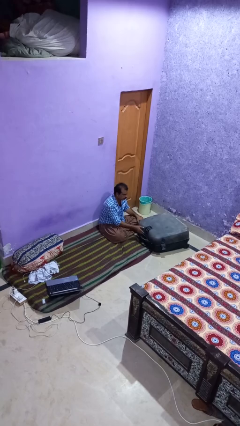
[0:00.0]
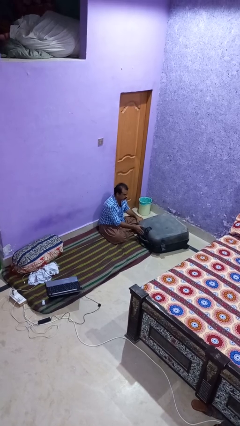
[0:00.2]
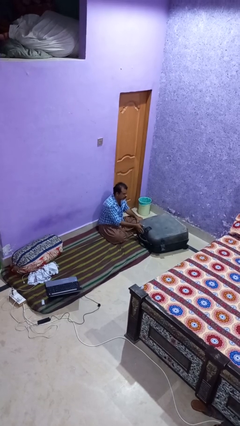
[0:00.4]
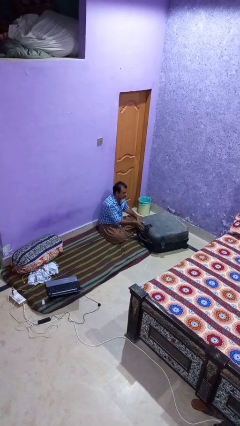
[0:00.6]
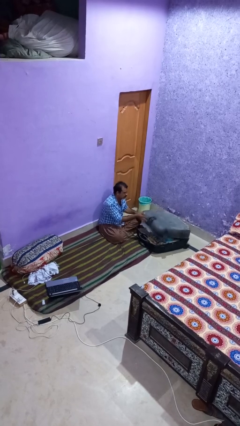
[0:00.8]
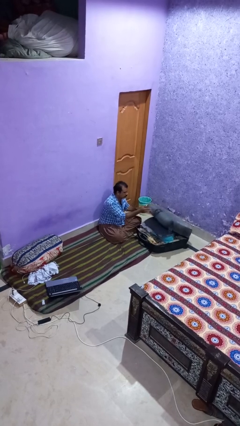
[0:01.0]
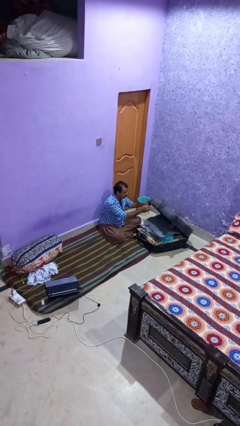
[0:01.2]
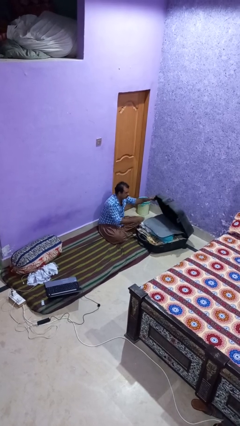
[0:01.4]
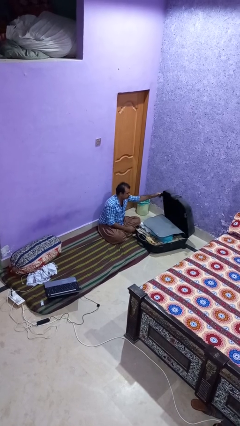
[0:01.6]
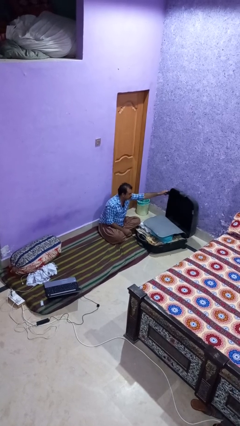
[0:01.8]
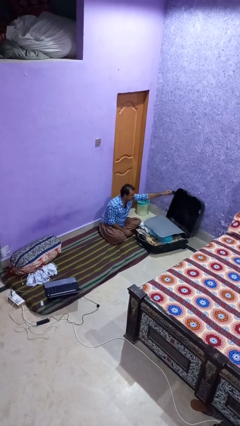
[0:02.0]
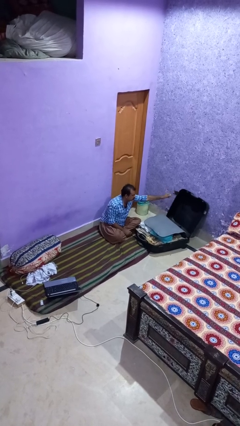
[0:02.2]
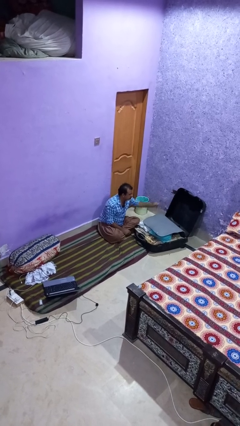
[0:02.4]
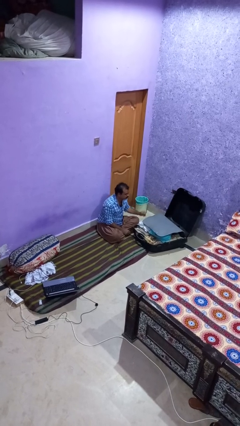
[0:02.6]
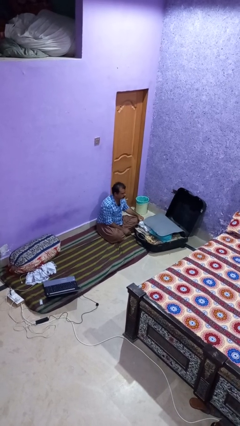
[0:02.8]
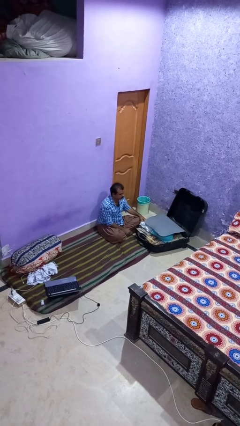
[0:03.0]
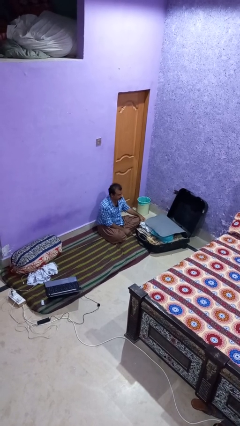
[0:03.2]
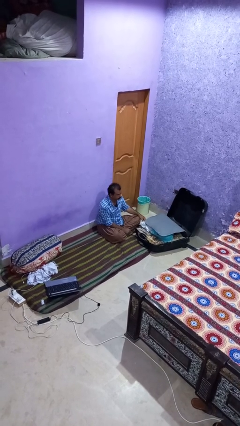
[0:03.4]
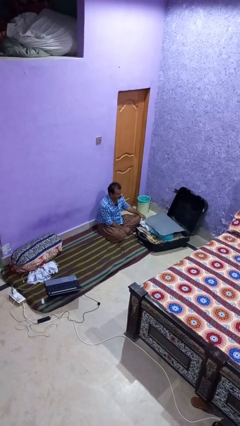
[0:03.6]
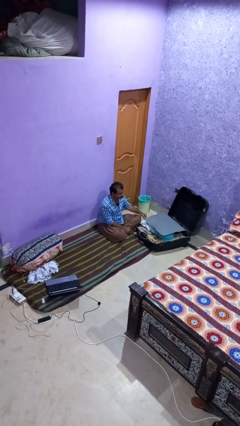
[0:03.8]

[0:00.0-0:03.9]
person opens suitcase

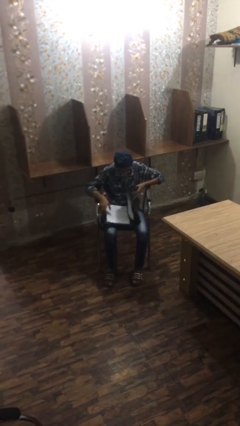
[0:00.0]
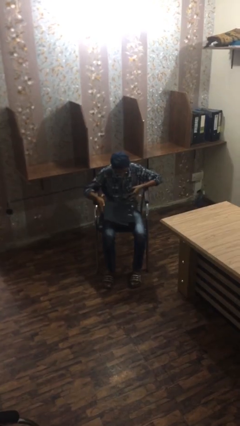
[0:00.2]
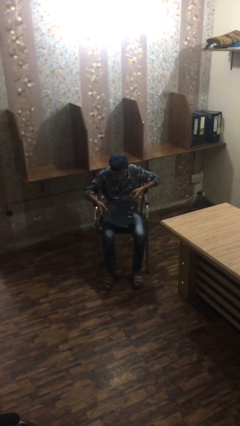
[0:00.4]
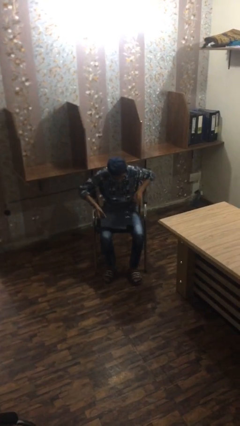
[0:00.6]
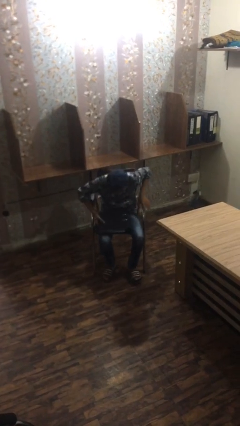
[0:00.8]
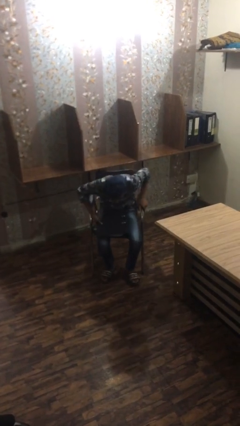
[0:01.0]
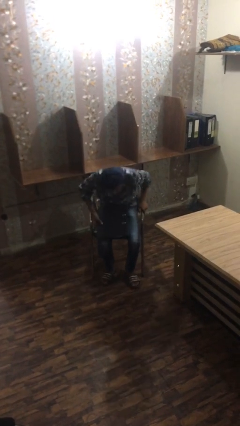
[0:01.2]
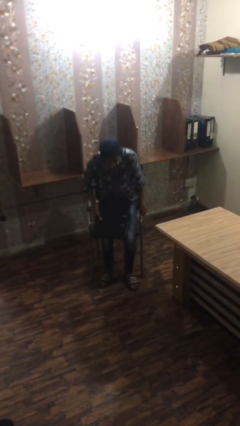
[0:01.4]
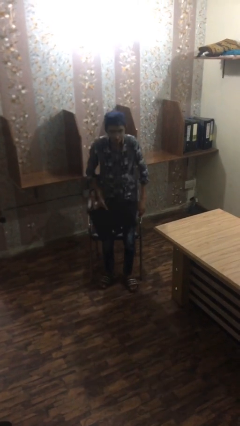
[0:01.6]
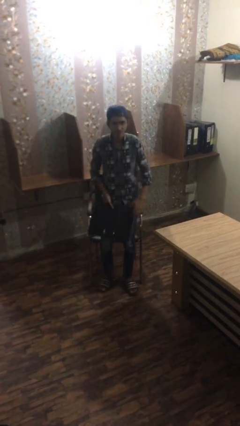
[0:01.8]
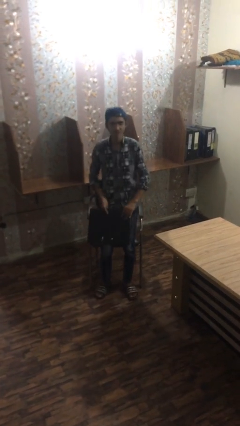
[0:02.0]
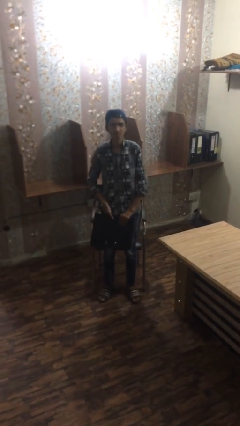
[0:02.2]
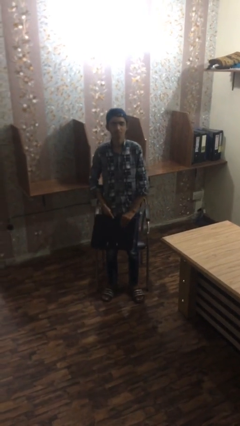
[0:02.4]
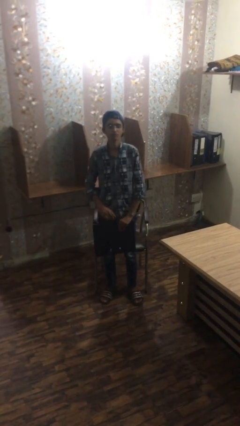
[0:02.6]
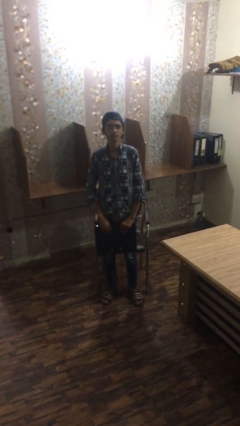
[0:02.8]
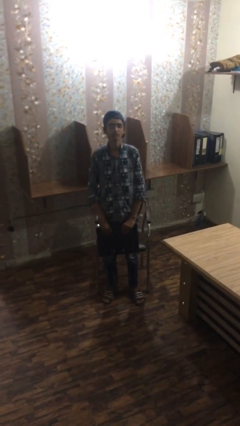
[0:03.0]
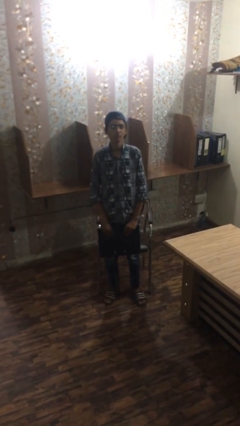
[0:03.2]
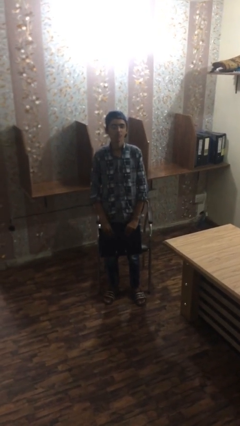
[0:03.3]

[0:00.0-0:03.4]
person stands up

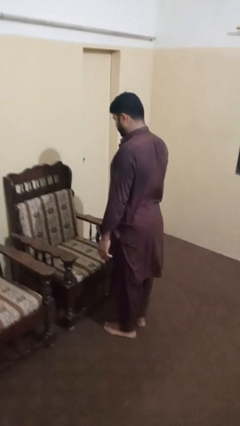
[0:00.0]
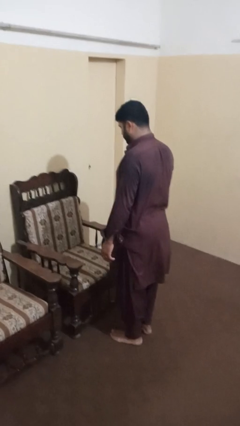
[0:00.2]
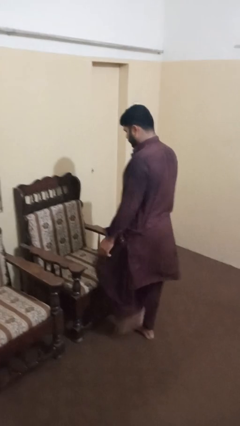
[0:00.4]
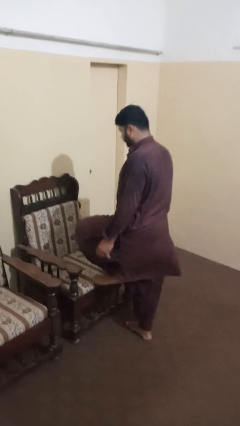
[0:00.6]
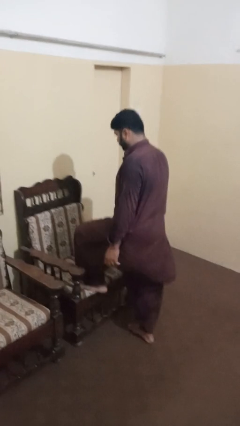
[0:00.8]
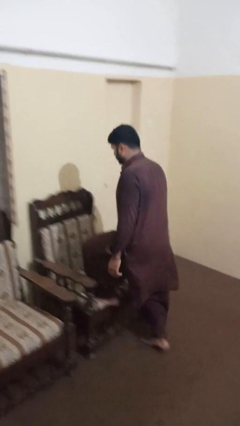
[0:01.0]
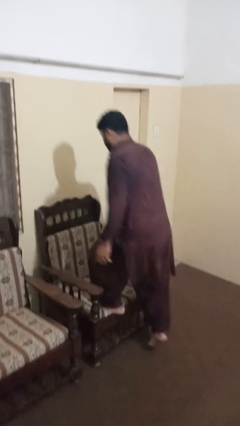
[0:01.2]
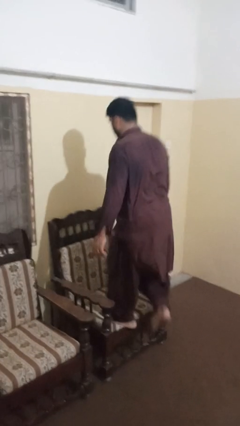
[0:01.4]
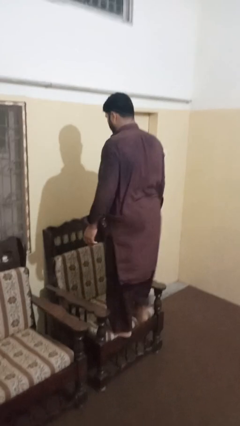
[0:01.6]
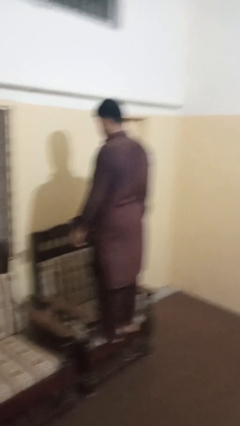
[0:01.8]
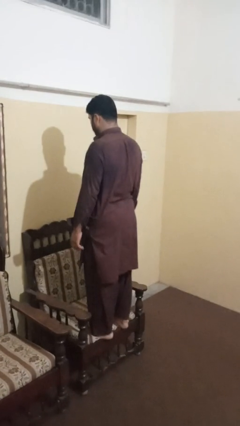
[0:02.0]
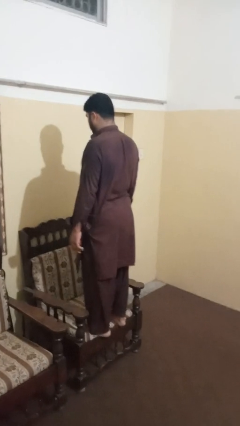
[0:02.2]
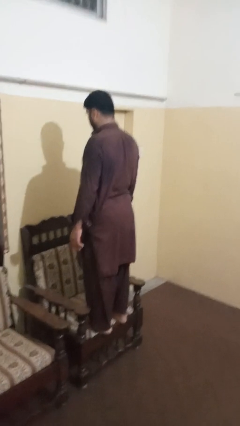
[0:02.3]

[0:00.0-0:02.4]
person climbs on chair

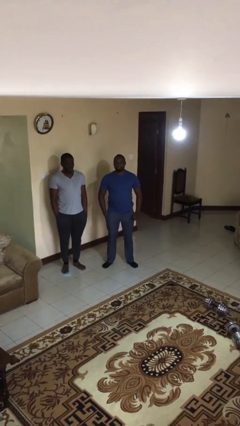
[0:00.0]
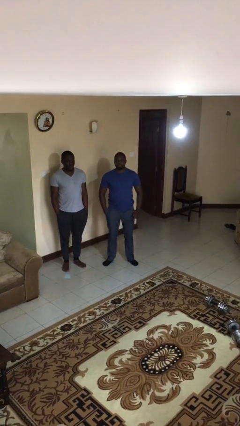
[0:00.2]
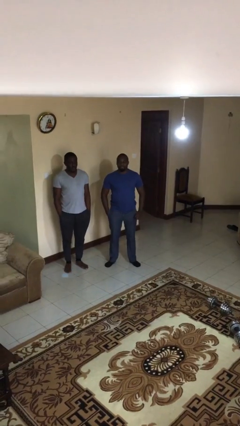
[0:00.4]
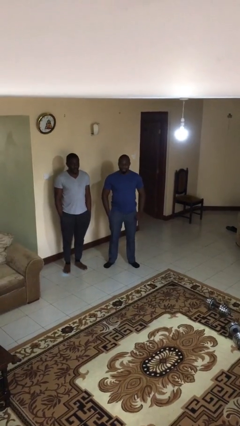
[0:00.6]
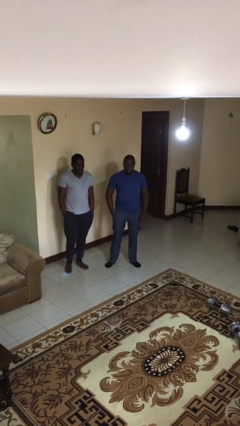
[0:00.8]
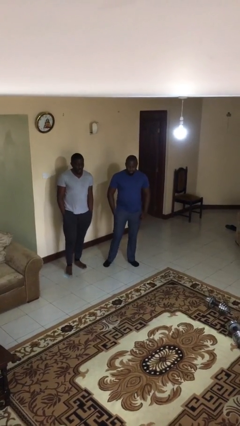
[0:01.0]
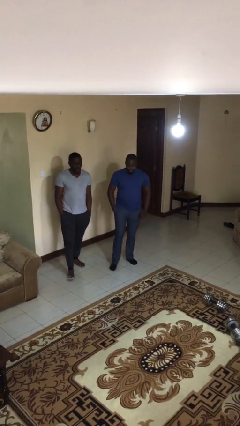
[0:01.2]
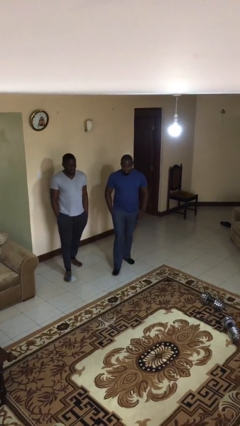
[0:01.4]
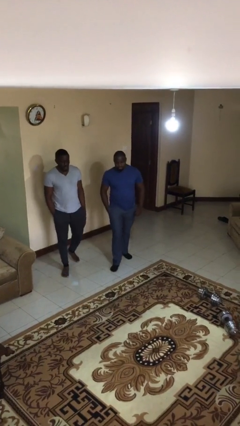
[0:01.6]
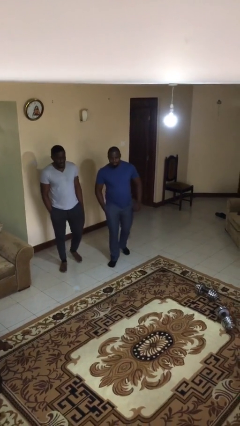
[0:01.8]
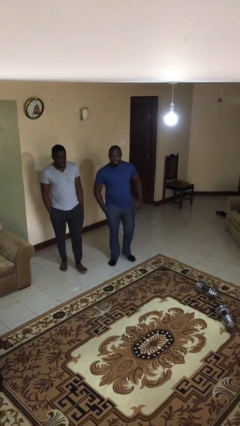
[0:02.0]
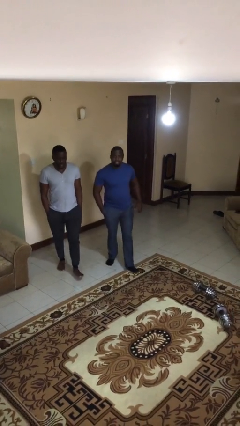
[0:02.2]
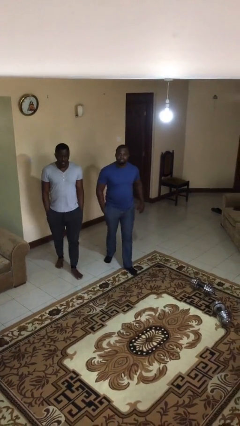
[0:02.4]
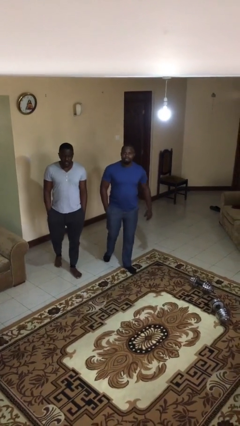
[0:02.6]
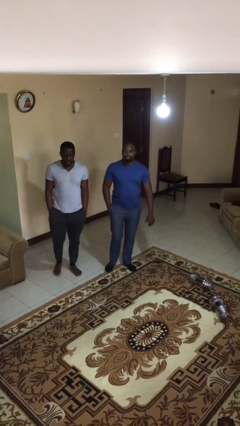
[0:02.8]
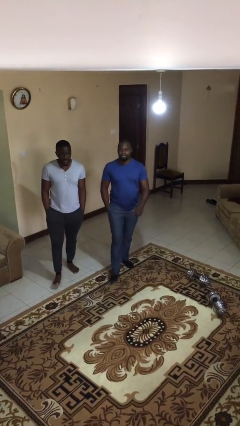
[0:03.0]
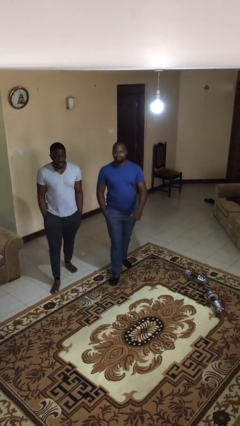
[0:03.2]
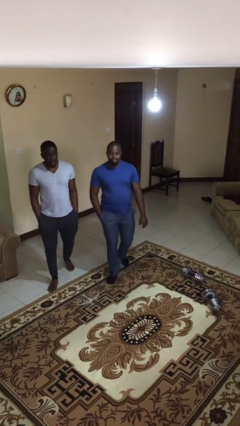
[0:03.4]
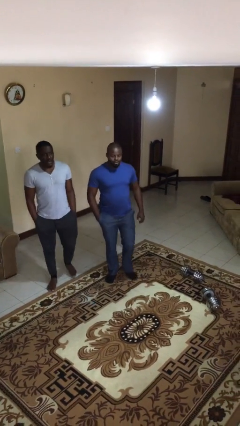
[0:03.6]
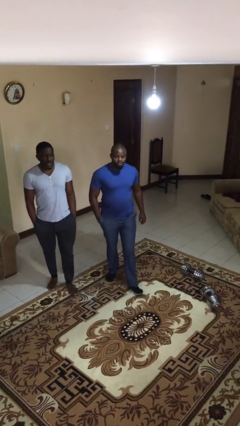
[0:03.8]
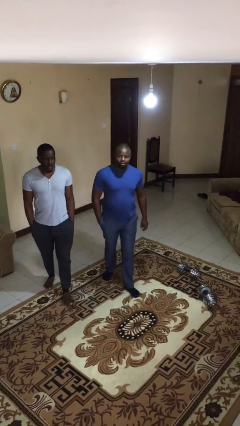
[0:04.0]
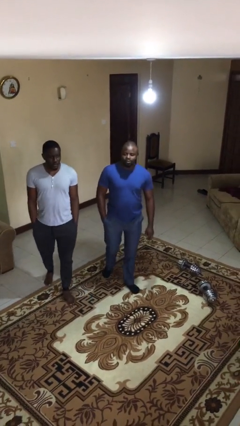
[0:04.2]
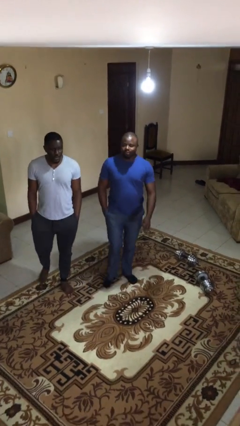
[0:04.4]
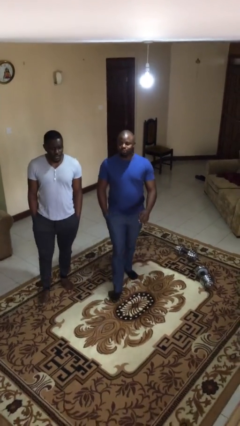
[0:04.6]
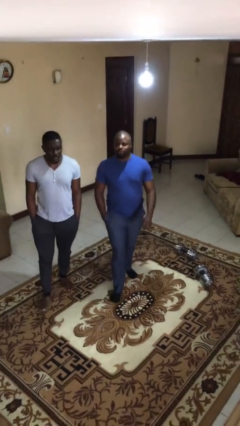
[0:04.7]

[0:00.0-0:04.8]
person talks to person

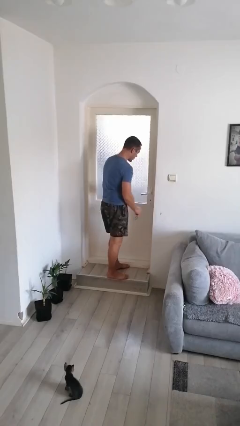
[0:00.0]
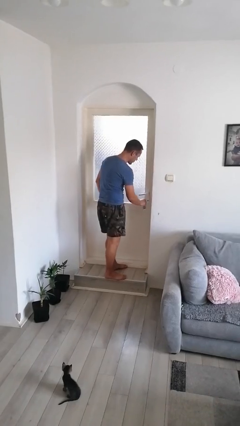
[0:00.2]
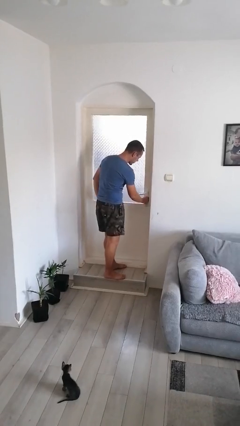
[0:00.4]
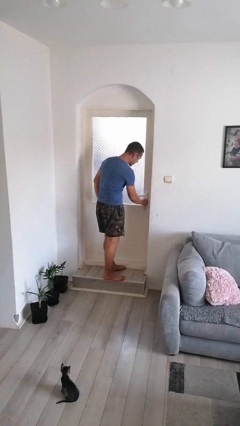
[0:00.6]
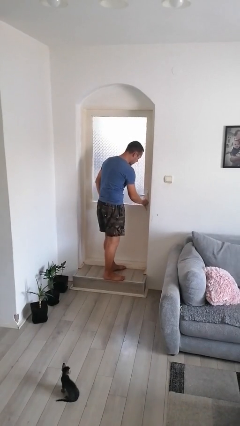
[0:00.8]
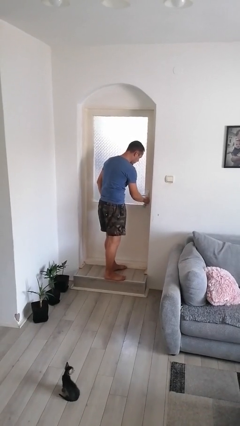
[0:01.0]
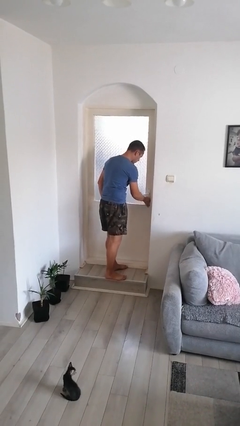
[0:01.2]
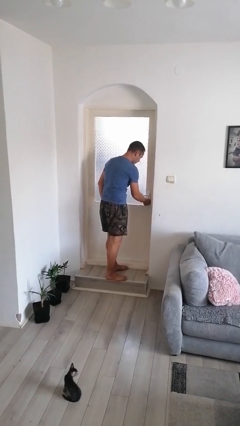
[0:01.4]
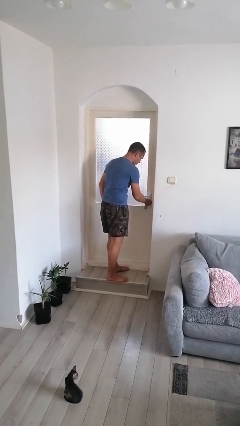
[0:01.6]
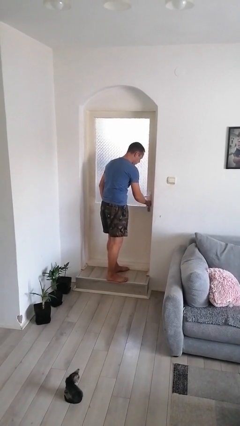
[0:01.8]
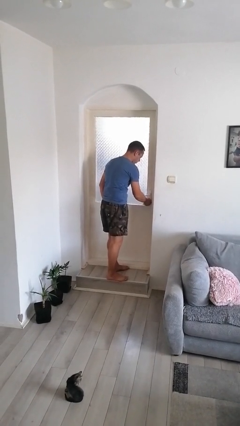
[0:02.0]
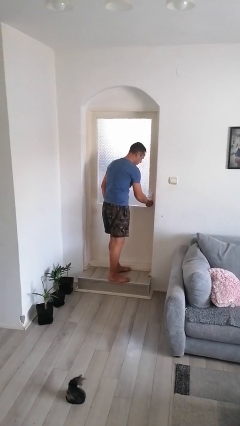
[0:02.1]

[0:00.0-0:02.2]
person locks door with keys

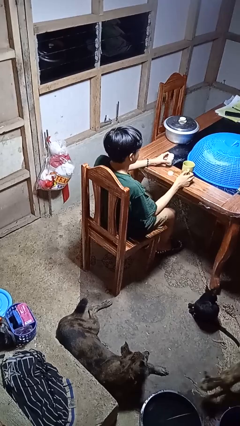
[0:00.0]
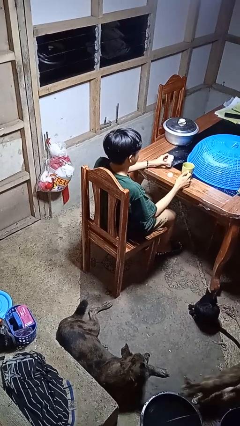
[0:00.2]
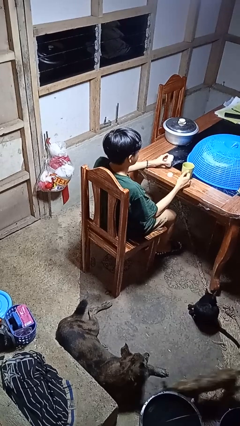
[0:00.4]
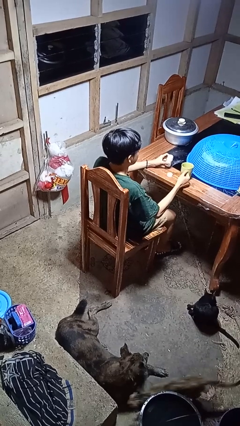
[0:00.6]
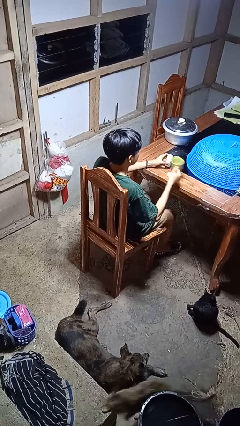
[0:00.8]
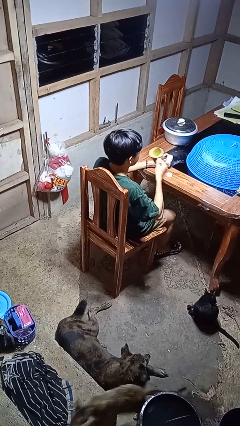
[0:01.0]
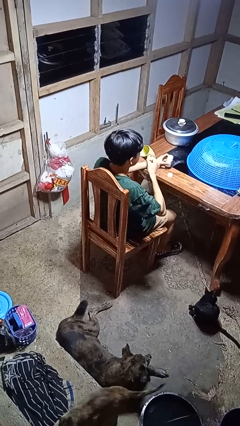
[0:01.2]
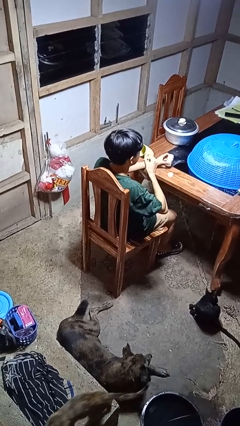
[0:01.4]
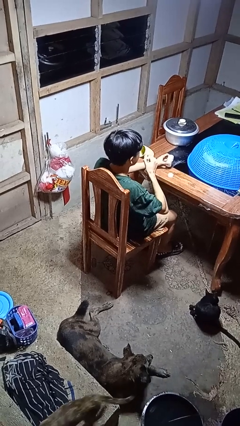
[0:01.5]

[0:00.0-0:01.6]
person drinks from cup
